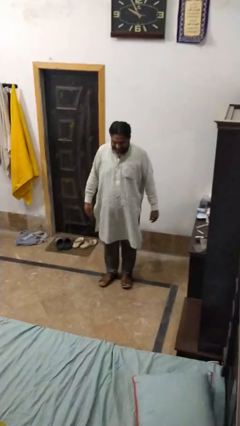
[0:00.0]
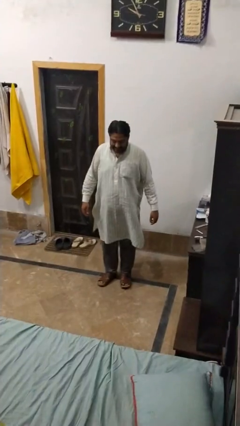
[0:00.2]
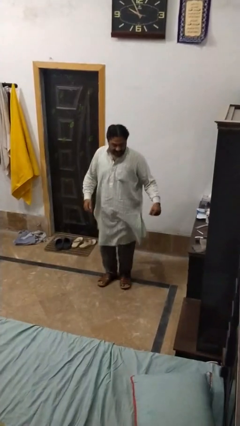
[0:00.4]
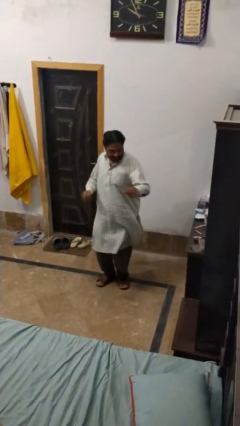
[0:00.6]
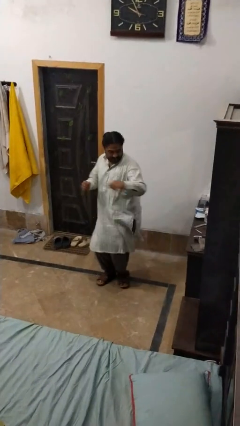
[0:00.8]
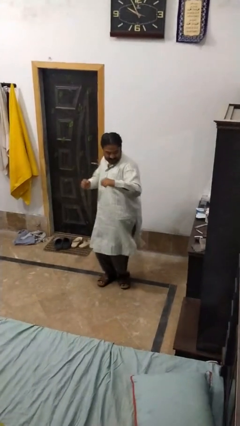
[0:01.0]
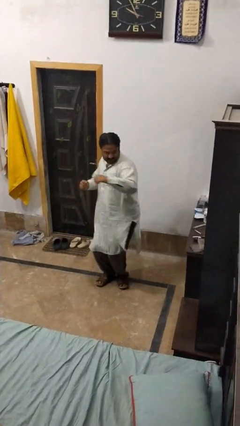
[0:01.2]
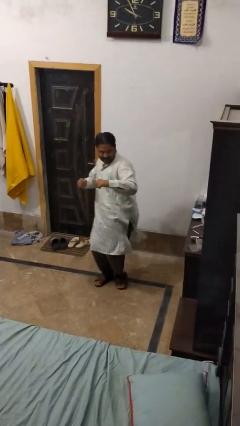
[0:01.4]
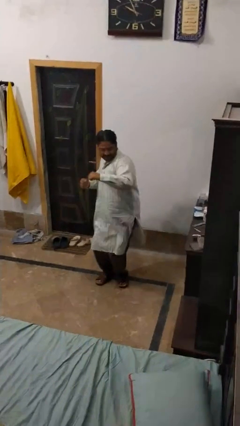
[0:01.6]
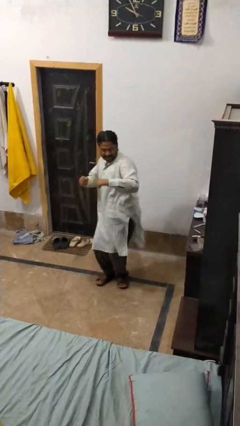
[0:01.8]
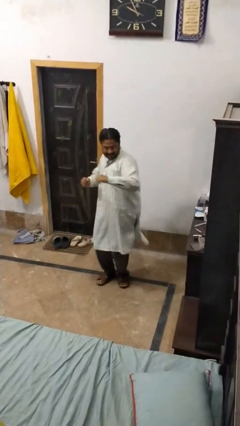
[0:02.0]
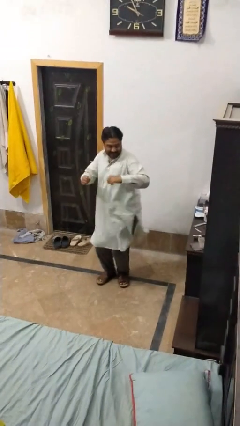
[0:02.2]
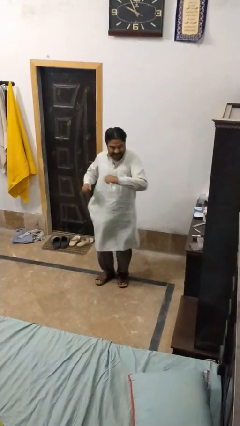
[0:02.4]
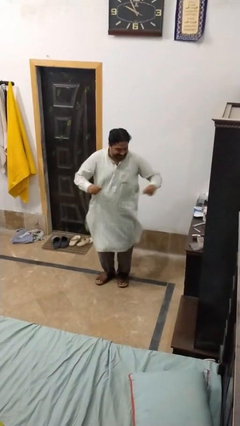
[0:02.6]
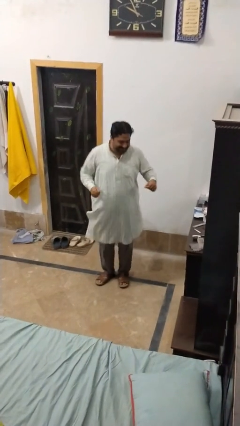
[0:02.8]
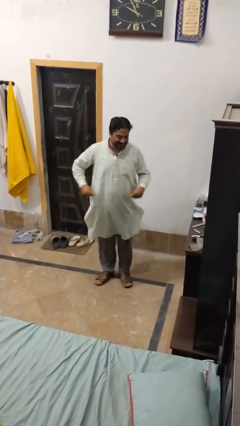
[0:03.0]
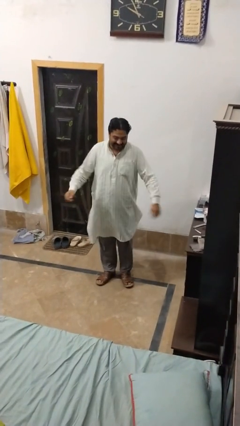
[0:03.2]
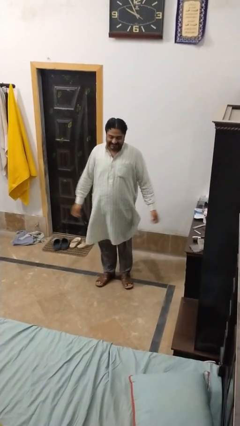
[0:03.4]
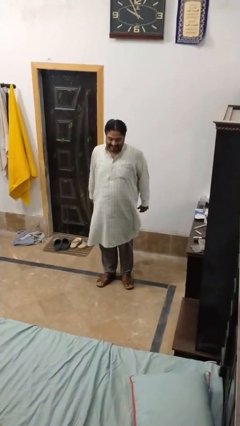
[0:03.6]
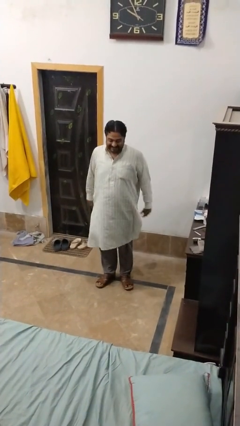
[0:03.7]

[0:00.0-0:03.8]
person dances in place

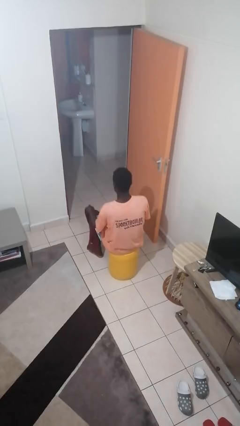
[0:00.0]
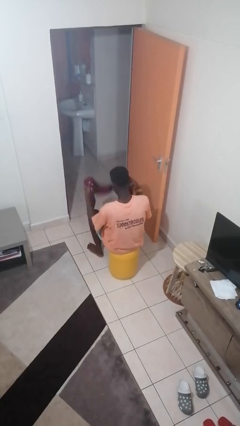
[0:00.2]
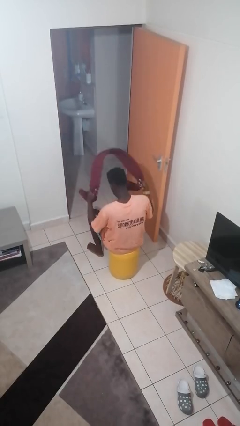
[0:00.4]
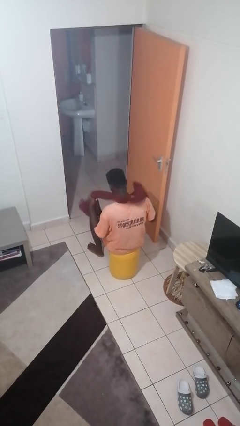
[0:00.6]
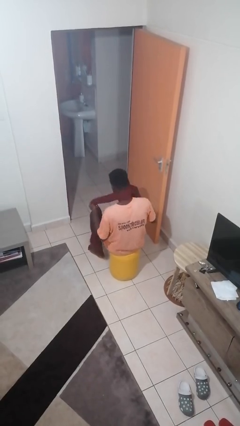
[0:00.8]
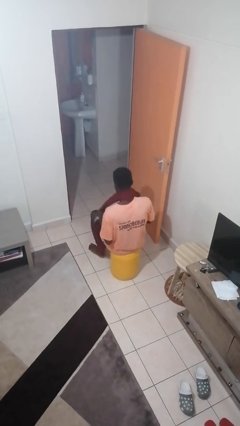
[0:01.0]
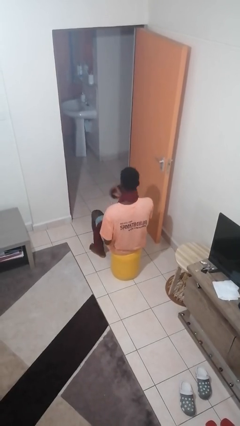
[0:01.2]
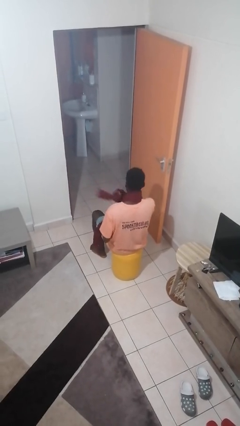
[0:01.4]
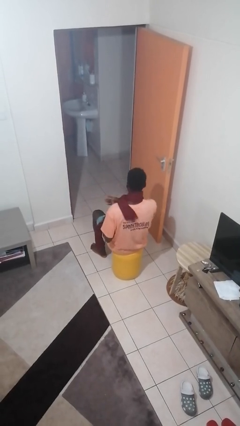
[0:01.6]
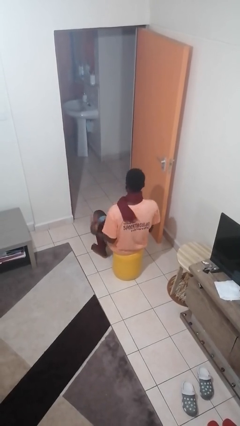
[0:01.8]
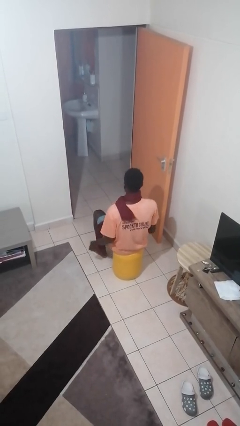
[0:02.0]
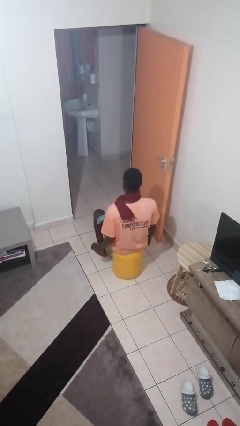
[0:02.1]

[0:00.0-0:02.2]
person puts on scarf

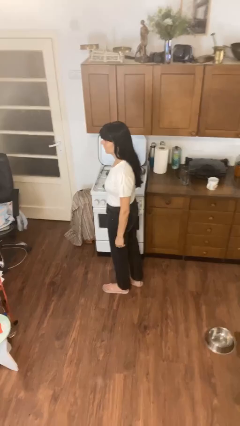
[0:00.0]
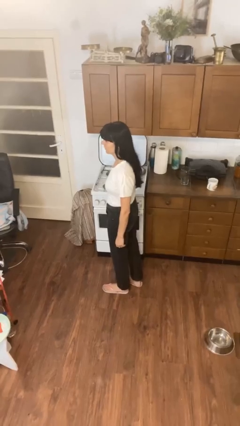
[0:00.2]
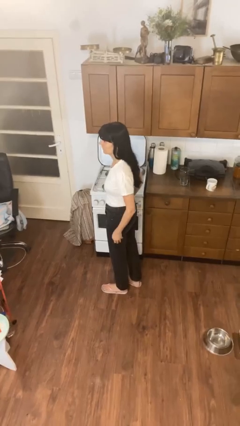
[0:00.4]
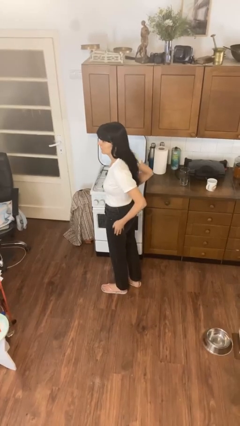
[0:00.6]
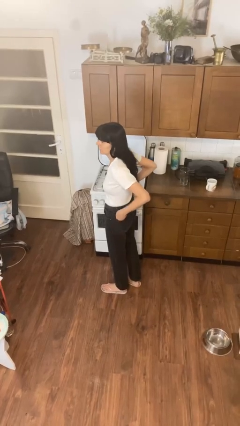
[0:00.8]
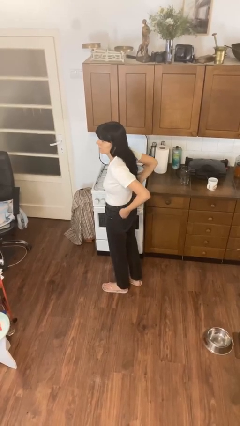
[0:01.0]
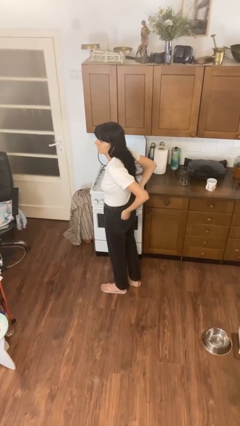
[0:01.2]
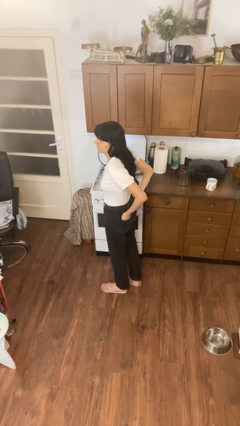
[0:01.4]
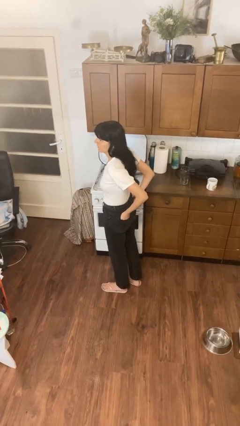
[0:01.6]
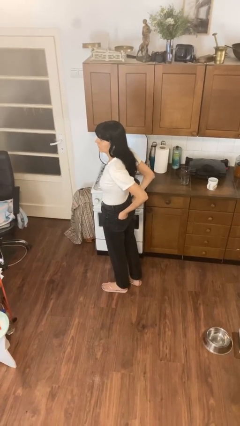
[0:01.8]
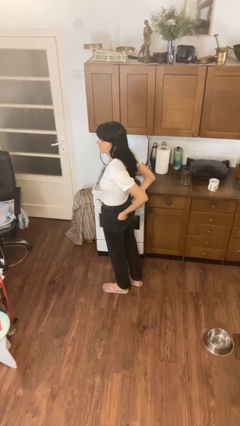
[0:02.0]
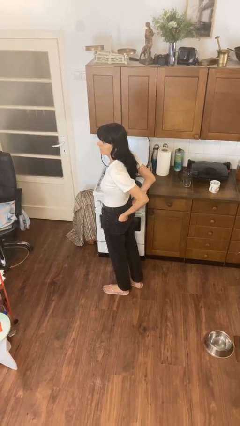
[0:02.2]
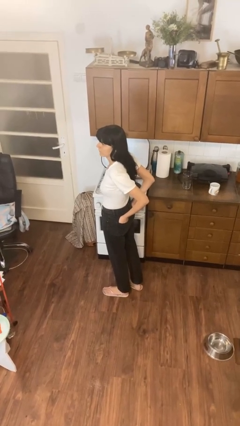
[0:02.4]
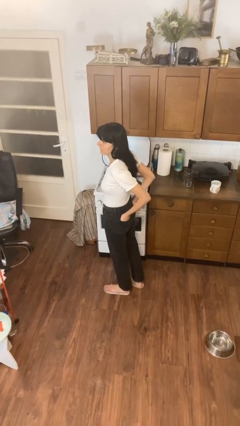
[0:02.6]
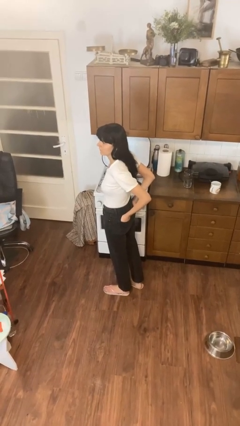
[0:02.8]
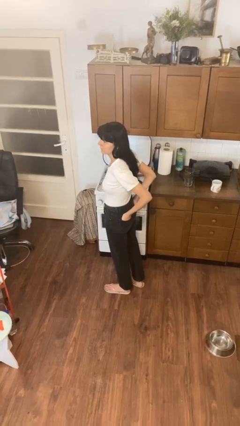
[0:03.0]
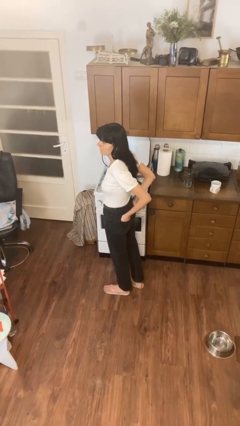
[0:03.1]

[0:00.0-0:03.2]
person puts hands in back pockets

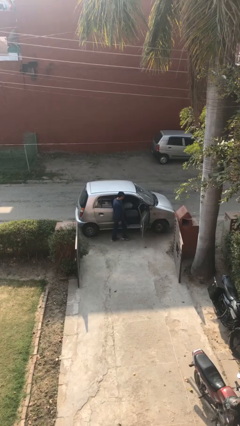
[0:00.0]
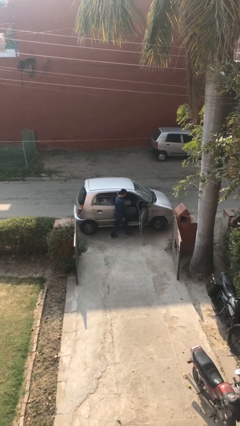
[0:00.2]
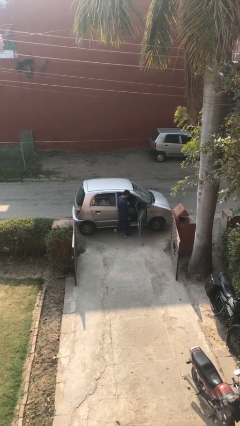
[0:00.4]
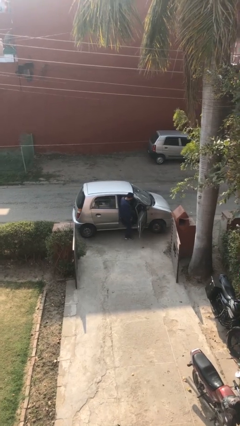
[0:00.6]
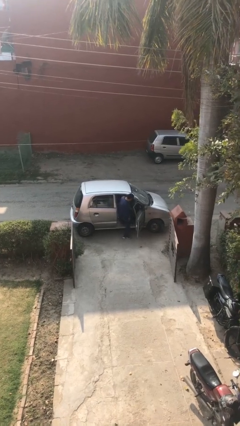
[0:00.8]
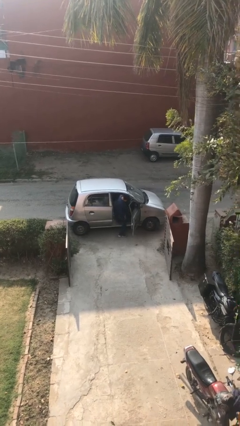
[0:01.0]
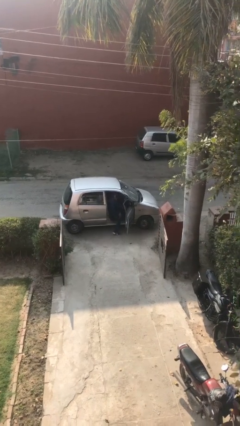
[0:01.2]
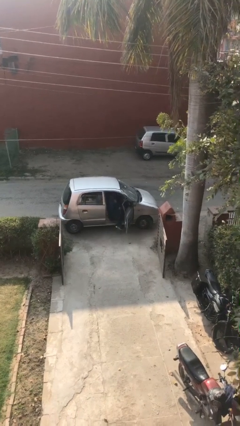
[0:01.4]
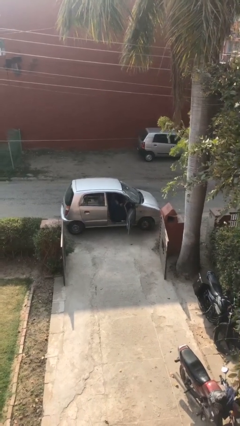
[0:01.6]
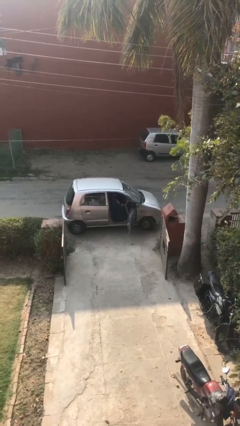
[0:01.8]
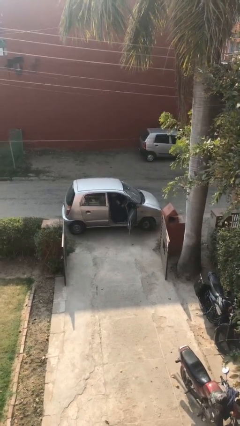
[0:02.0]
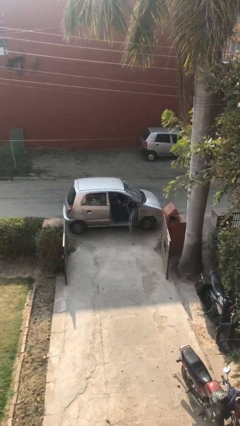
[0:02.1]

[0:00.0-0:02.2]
person enters car

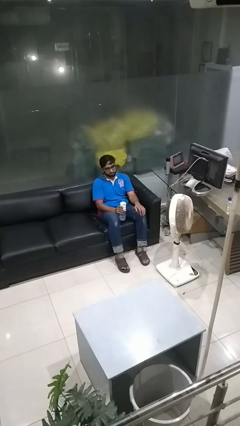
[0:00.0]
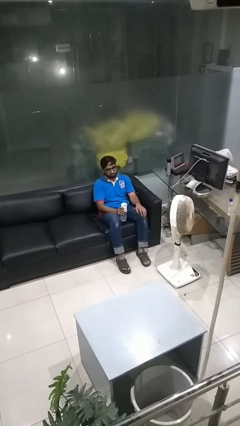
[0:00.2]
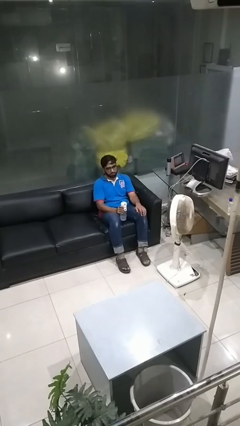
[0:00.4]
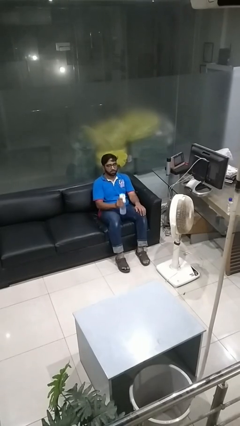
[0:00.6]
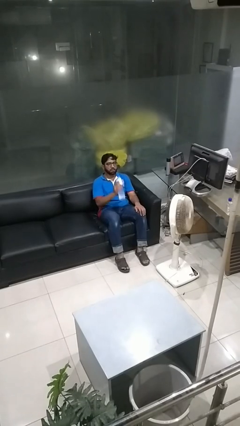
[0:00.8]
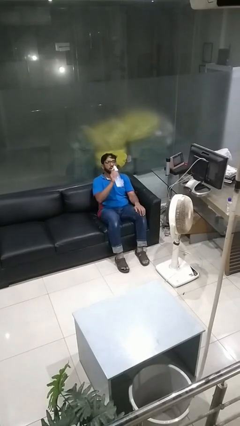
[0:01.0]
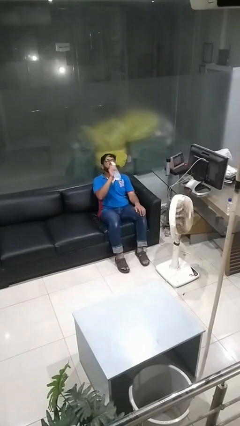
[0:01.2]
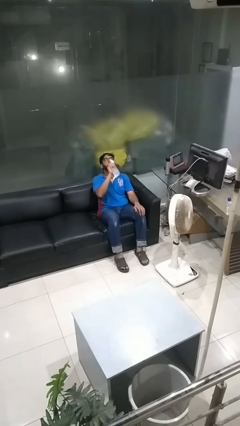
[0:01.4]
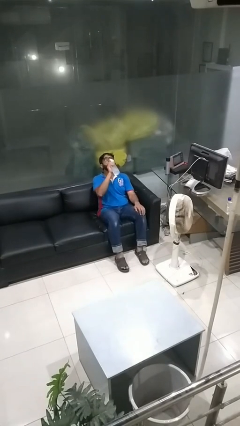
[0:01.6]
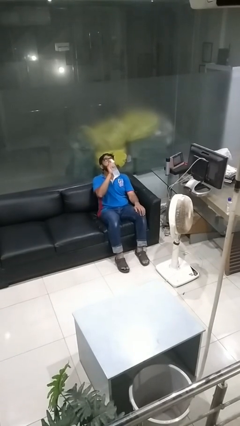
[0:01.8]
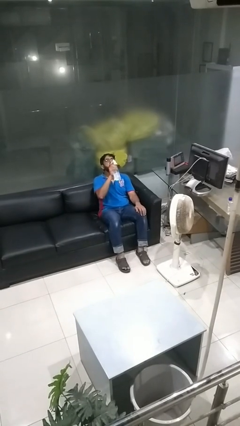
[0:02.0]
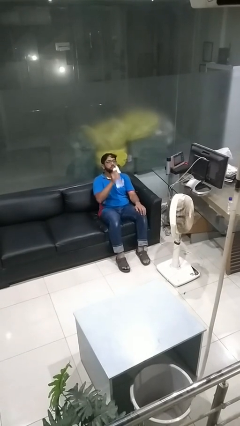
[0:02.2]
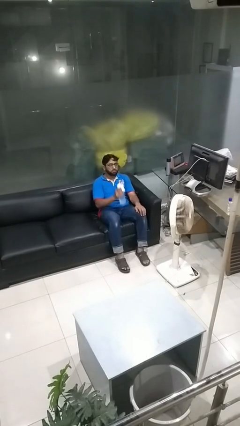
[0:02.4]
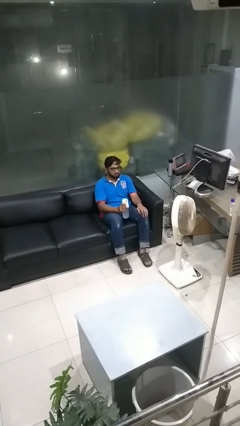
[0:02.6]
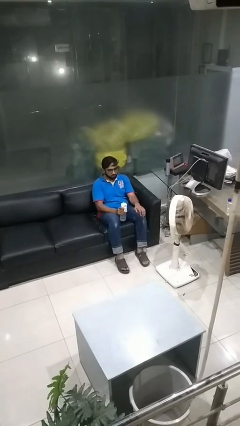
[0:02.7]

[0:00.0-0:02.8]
person drinks from bottle

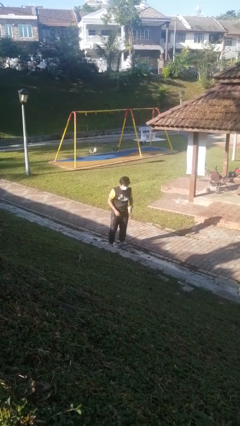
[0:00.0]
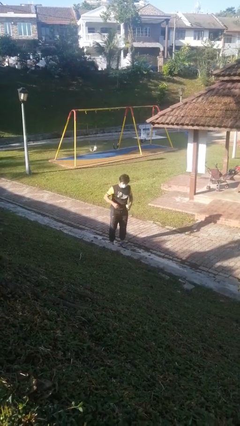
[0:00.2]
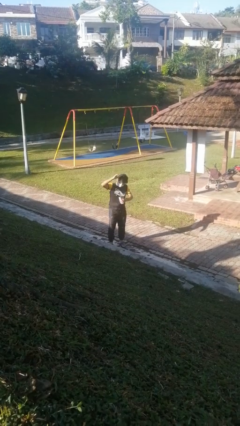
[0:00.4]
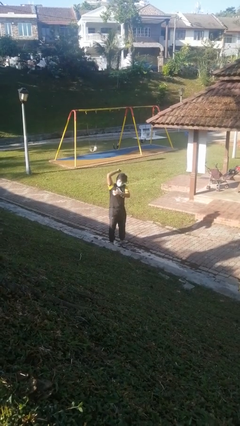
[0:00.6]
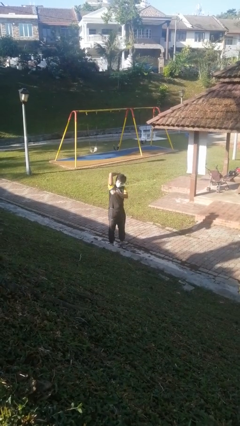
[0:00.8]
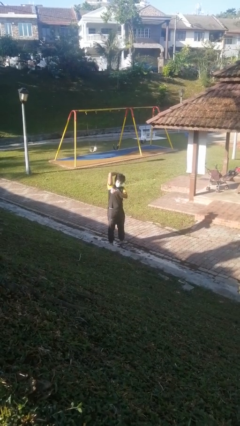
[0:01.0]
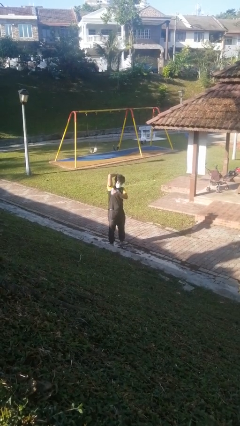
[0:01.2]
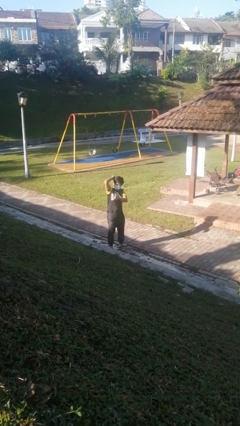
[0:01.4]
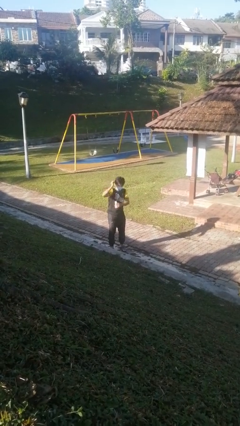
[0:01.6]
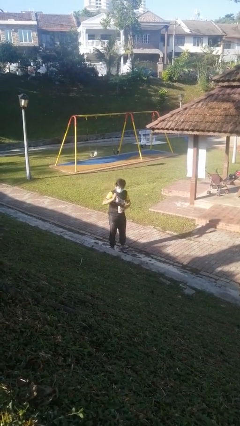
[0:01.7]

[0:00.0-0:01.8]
person applies deodorant

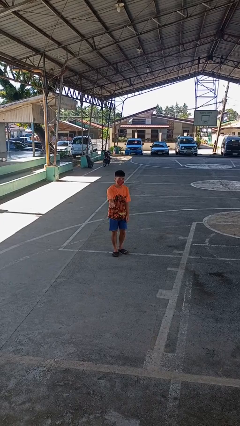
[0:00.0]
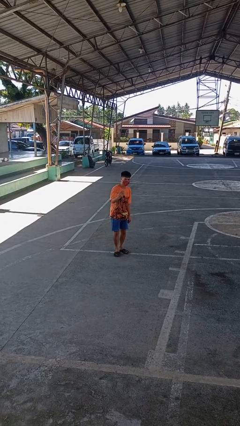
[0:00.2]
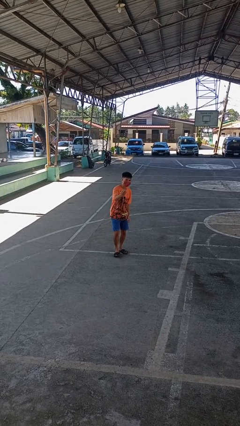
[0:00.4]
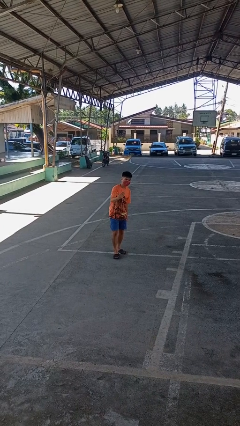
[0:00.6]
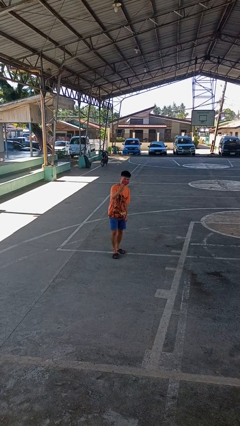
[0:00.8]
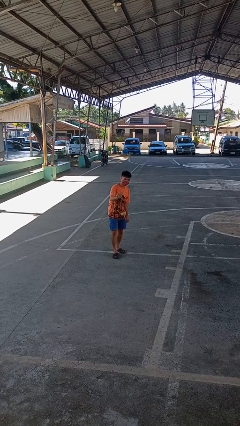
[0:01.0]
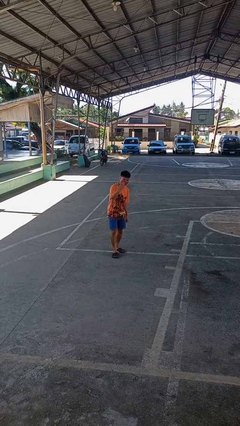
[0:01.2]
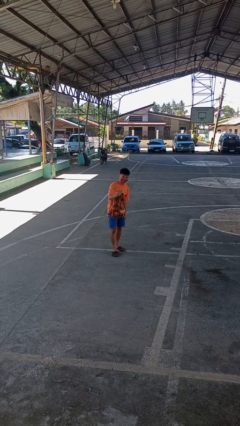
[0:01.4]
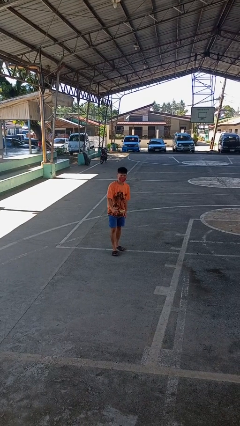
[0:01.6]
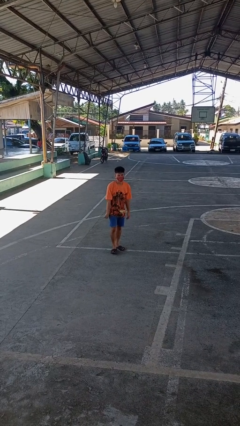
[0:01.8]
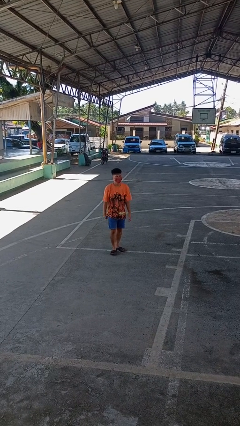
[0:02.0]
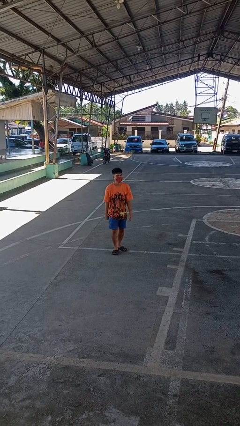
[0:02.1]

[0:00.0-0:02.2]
person gestures come here
